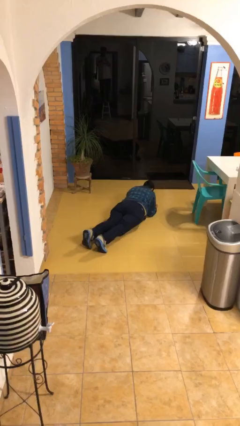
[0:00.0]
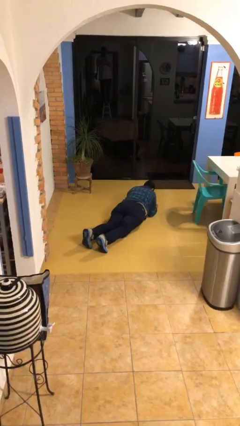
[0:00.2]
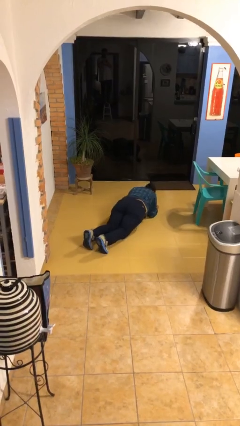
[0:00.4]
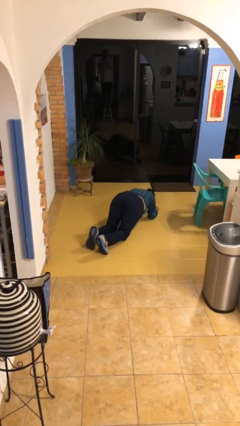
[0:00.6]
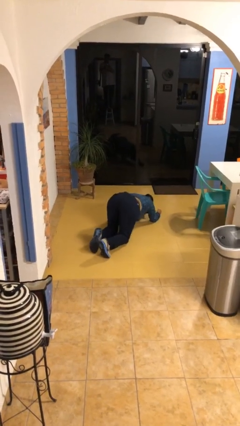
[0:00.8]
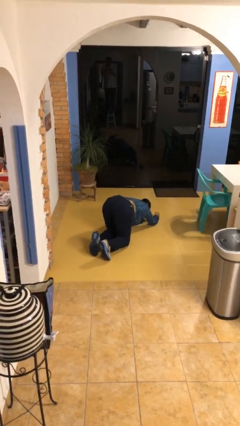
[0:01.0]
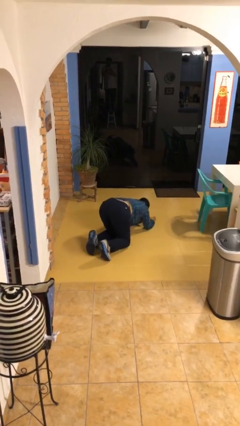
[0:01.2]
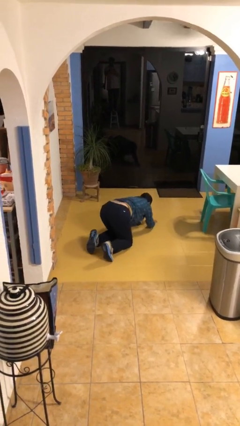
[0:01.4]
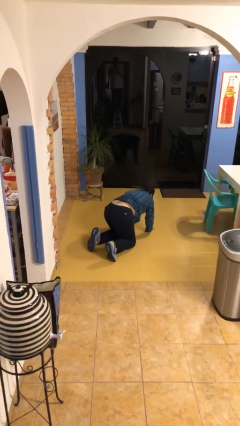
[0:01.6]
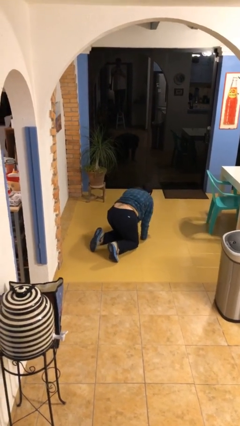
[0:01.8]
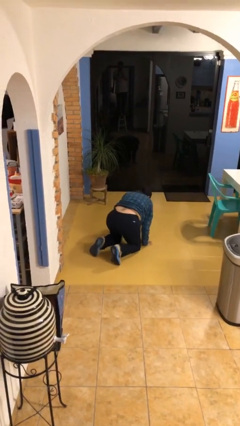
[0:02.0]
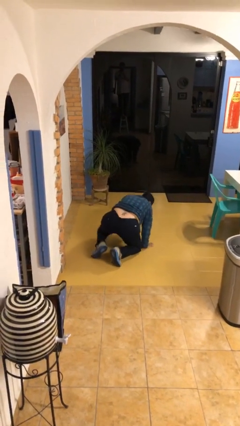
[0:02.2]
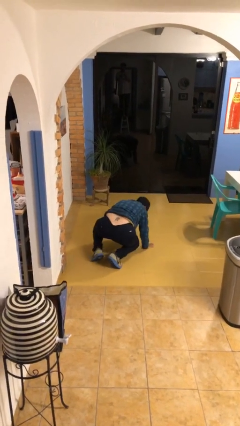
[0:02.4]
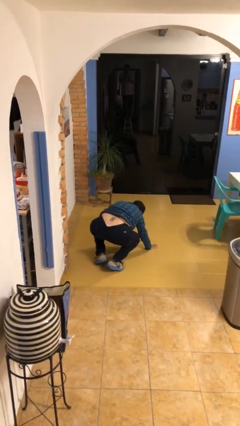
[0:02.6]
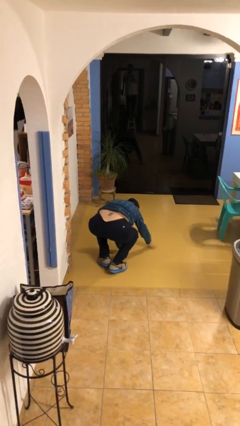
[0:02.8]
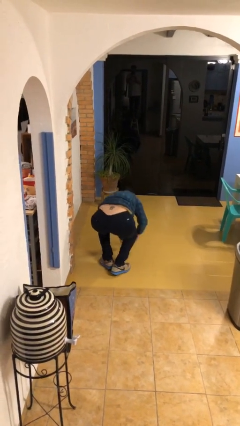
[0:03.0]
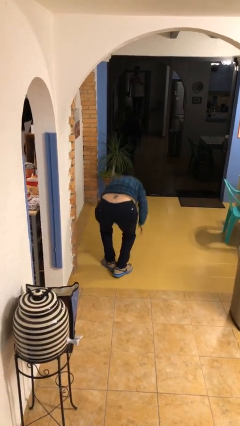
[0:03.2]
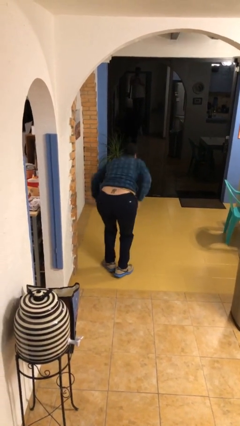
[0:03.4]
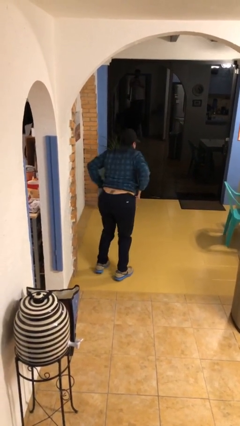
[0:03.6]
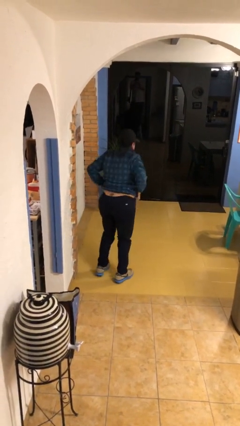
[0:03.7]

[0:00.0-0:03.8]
person stands up from floor

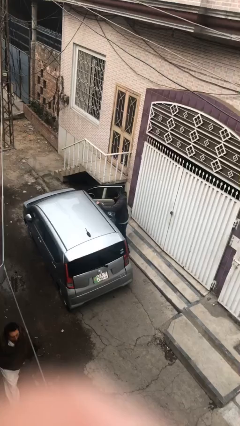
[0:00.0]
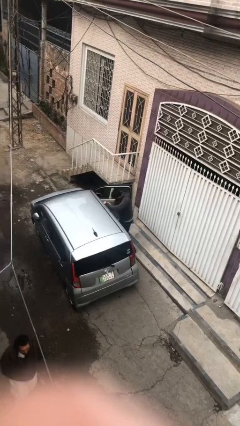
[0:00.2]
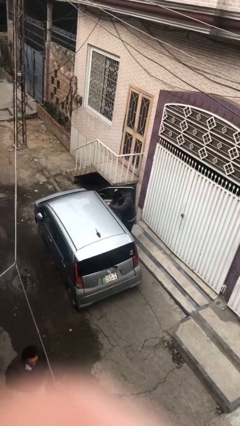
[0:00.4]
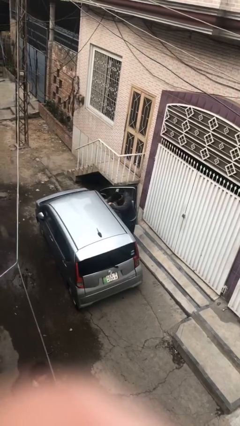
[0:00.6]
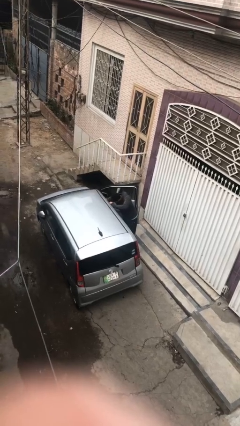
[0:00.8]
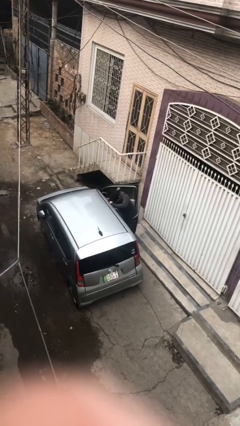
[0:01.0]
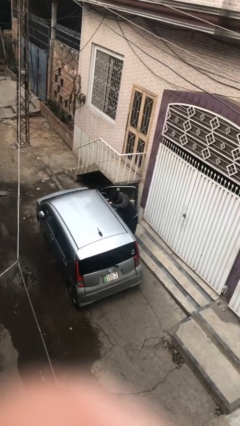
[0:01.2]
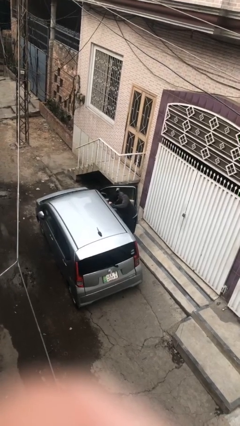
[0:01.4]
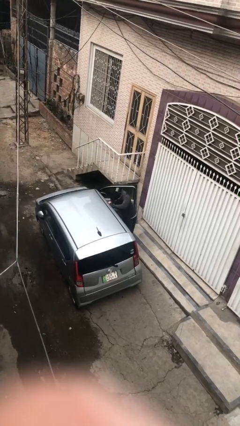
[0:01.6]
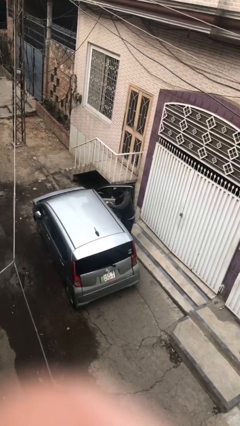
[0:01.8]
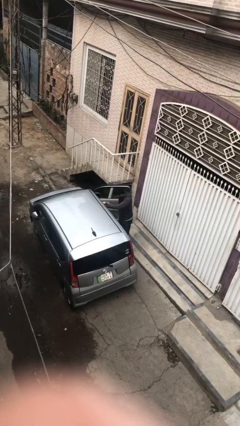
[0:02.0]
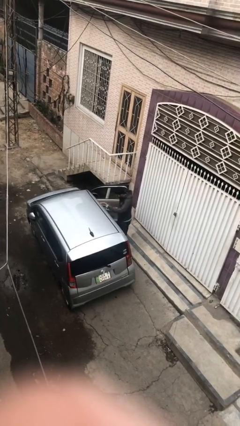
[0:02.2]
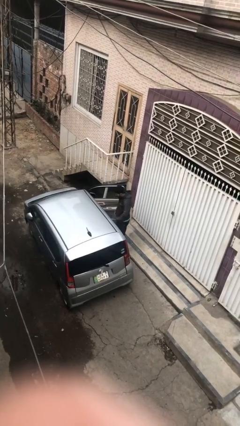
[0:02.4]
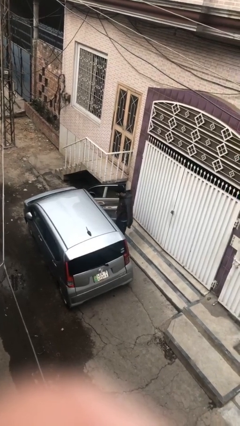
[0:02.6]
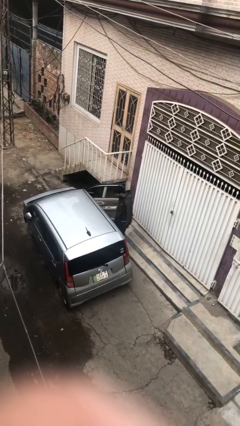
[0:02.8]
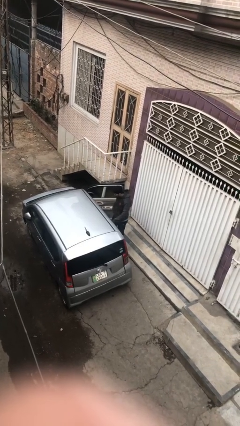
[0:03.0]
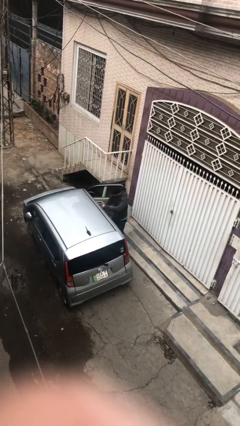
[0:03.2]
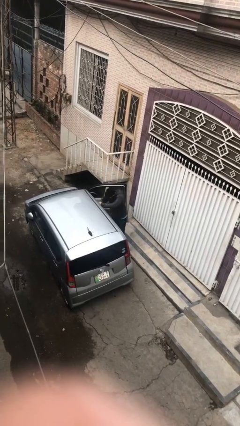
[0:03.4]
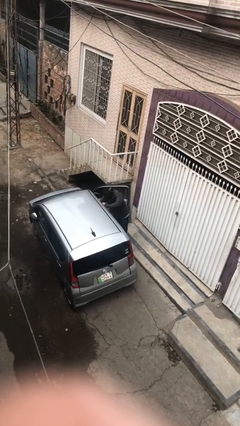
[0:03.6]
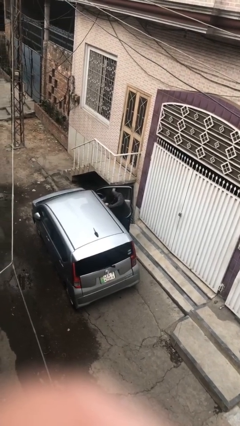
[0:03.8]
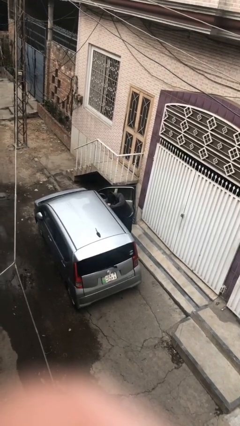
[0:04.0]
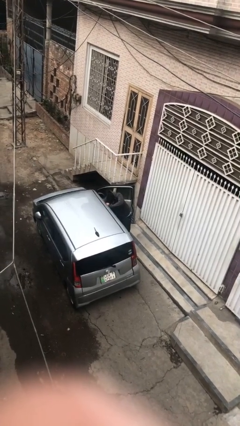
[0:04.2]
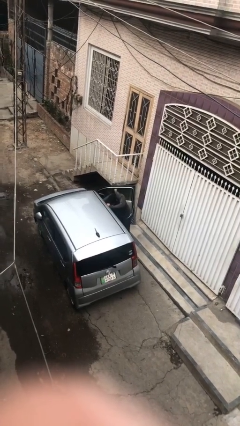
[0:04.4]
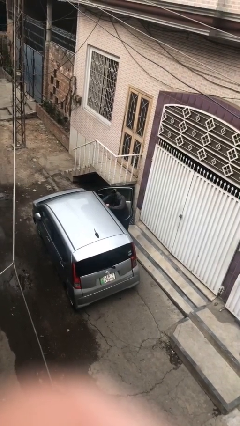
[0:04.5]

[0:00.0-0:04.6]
person loads car

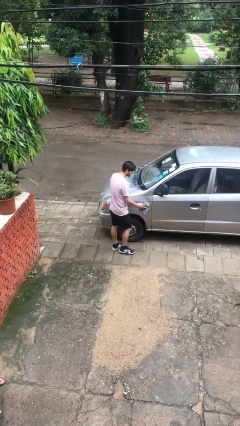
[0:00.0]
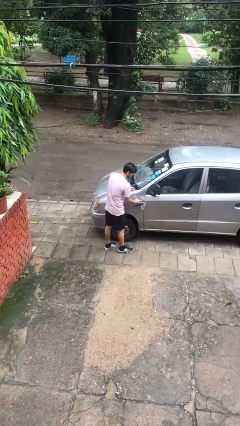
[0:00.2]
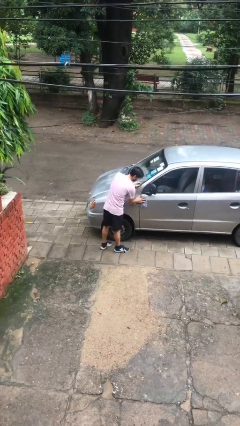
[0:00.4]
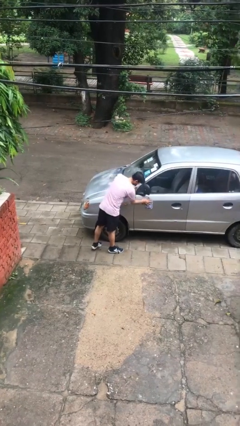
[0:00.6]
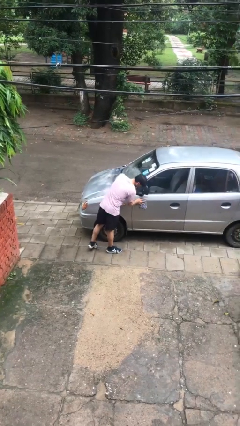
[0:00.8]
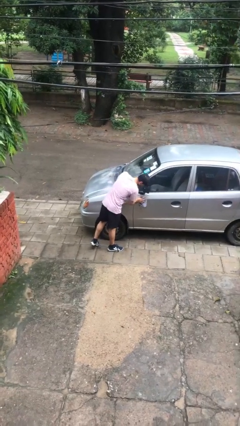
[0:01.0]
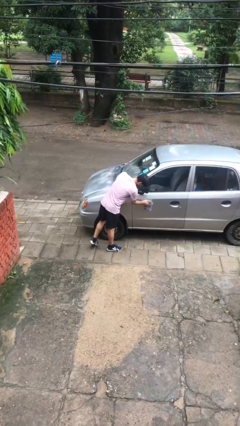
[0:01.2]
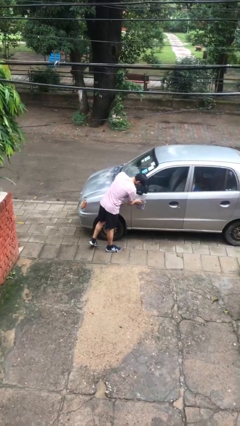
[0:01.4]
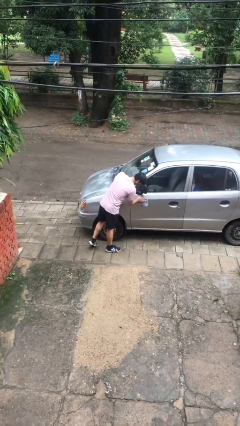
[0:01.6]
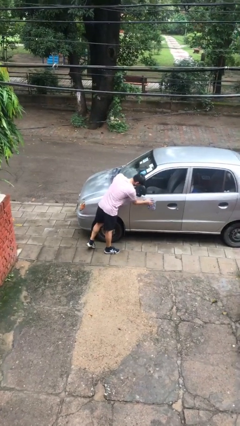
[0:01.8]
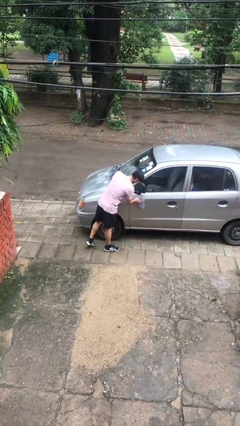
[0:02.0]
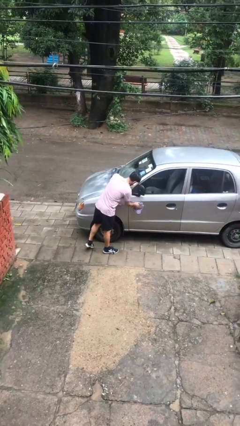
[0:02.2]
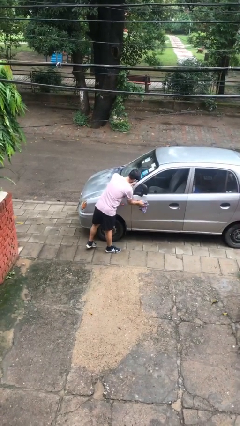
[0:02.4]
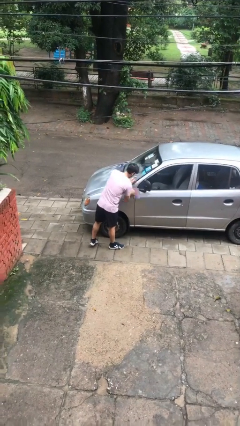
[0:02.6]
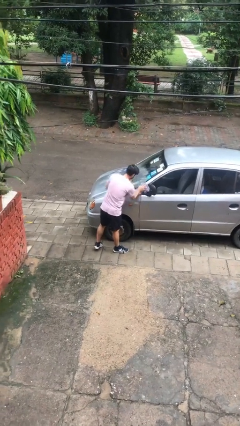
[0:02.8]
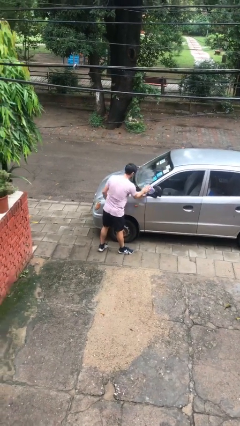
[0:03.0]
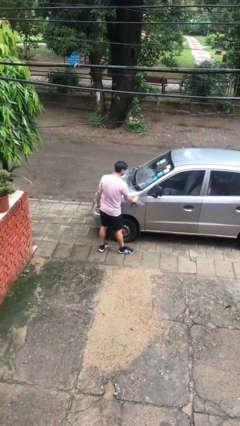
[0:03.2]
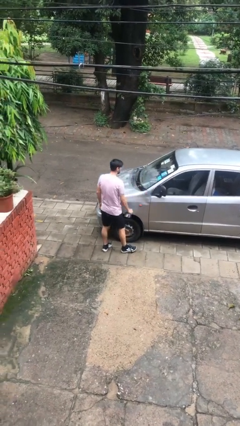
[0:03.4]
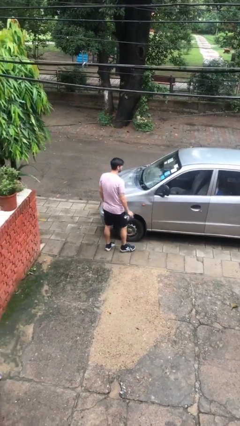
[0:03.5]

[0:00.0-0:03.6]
person polishes car with rag

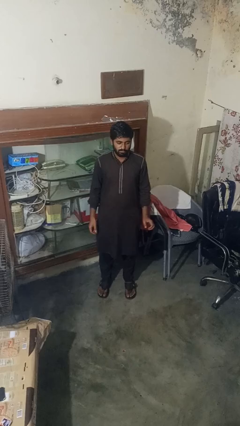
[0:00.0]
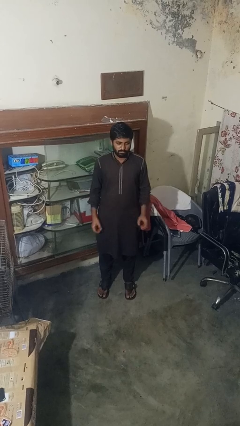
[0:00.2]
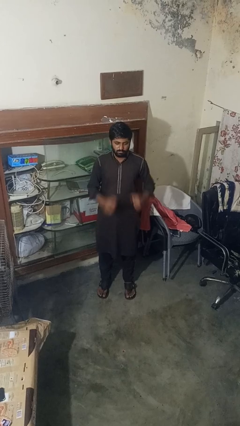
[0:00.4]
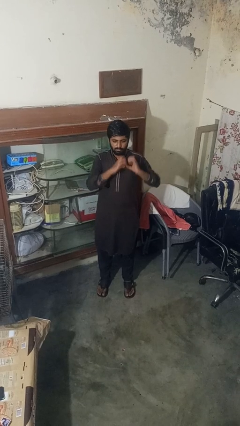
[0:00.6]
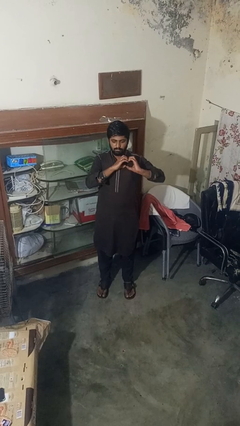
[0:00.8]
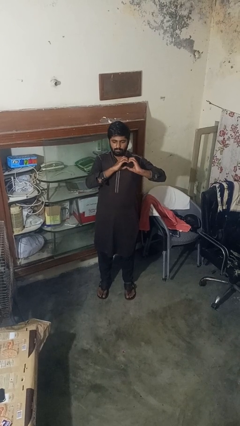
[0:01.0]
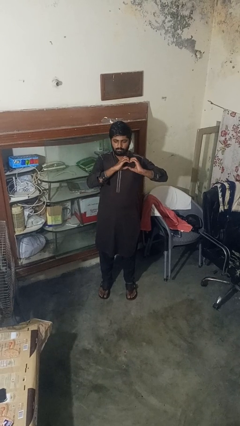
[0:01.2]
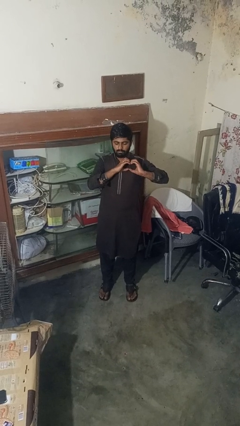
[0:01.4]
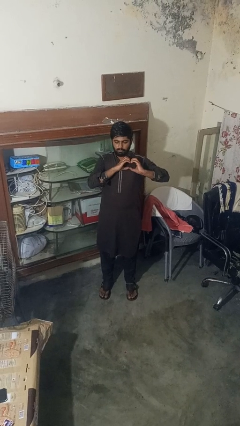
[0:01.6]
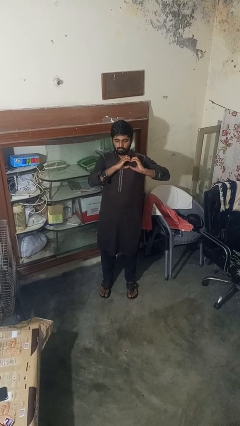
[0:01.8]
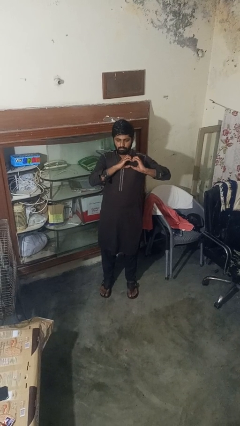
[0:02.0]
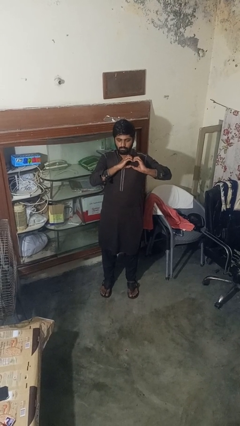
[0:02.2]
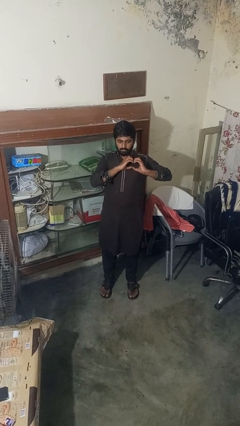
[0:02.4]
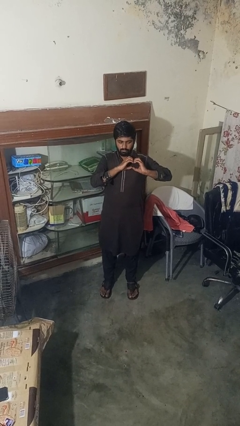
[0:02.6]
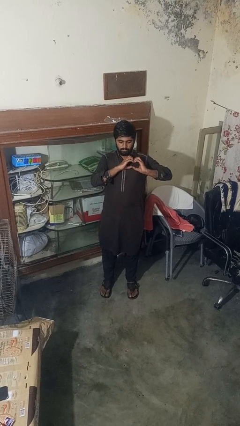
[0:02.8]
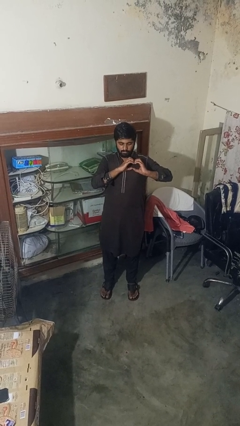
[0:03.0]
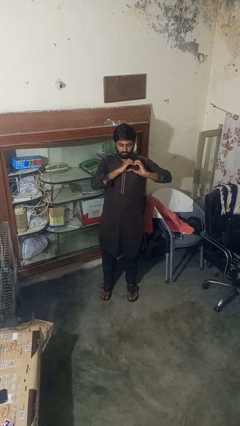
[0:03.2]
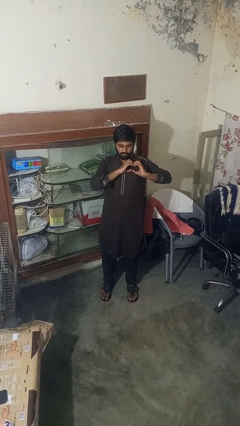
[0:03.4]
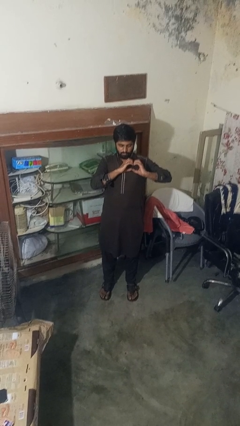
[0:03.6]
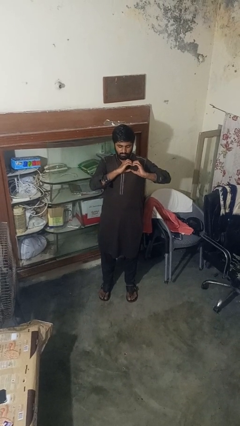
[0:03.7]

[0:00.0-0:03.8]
person gestures heart

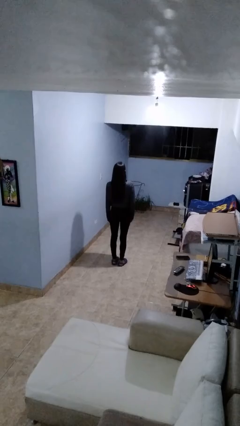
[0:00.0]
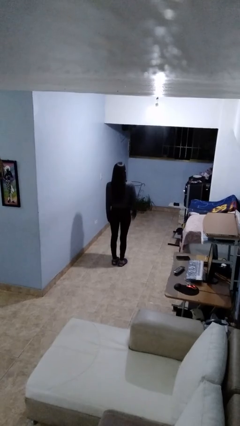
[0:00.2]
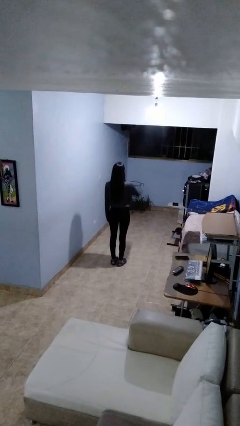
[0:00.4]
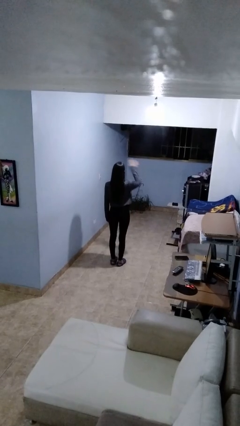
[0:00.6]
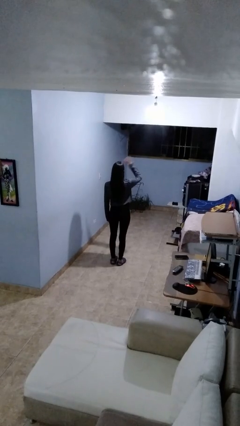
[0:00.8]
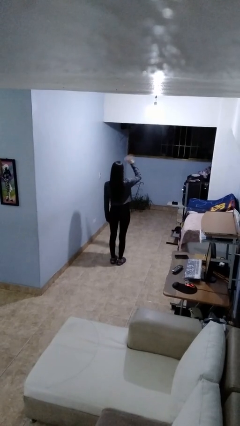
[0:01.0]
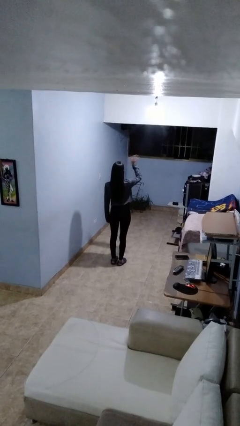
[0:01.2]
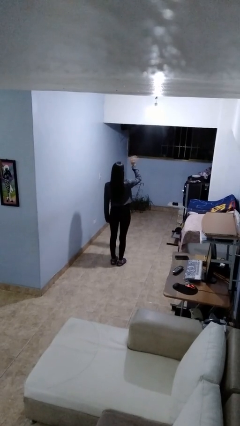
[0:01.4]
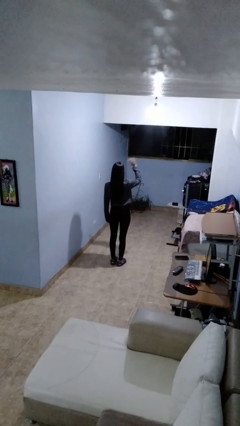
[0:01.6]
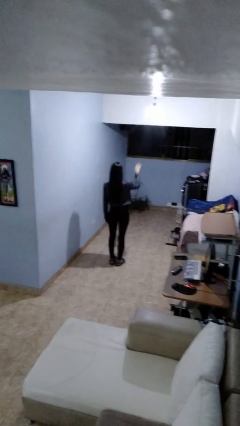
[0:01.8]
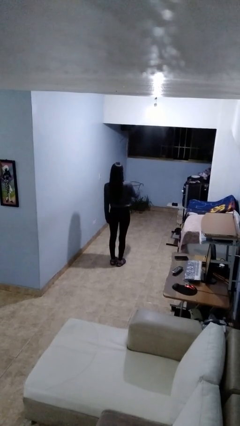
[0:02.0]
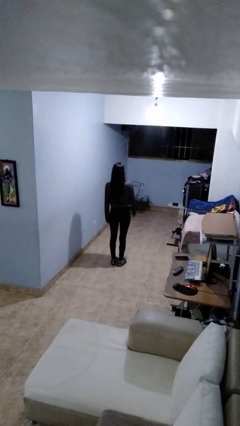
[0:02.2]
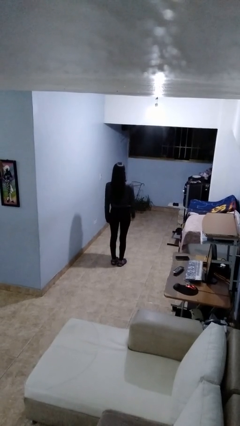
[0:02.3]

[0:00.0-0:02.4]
person salutes
